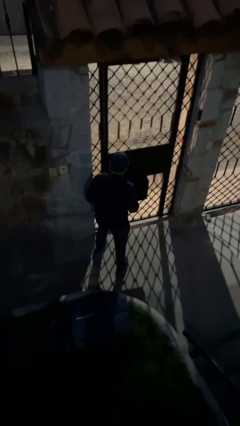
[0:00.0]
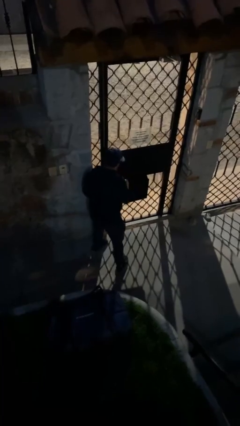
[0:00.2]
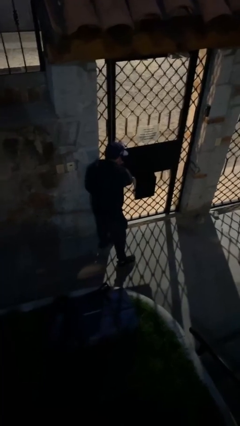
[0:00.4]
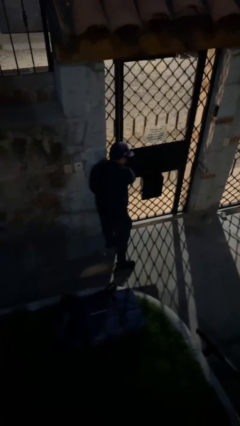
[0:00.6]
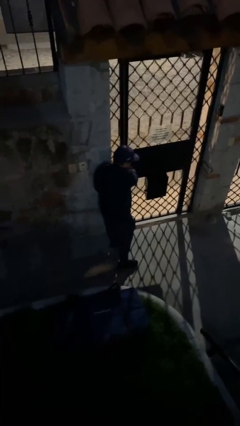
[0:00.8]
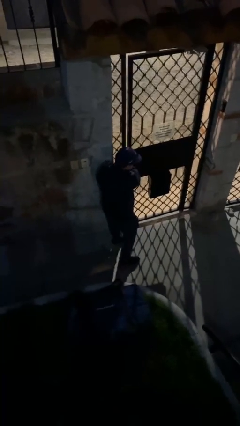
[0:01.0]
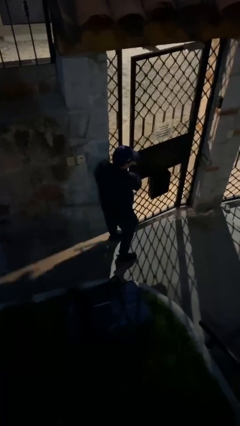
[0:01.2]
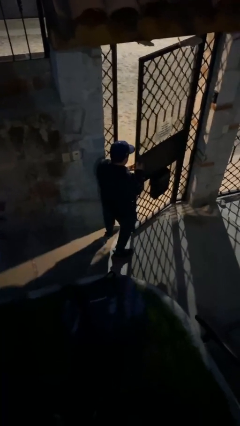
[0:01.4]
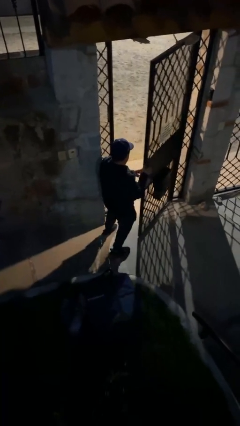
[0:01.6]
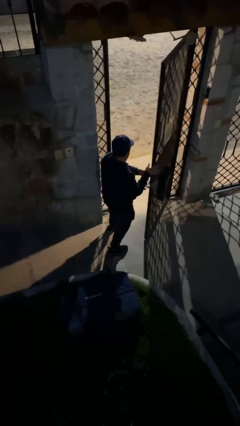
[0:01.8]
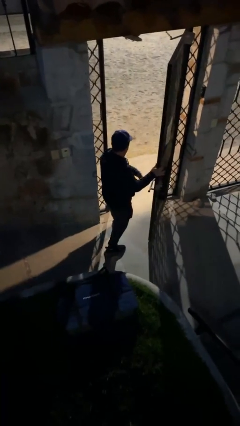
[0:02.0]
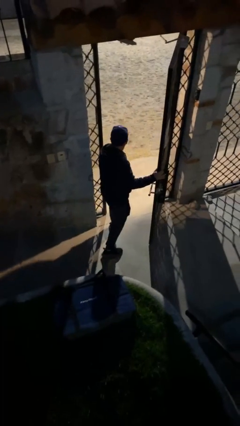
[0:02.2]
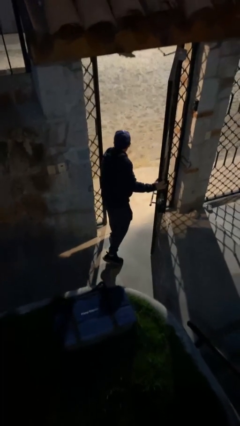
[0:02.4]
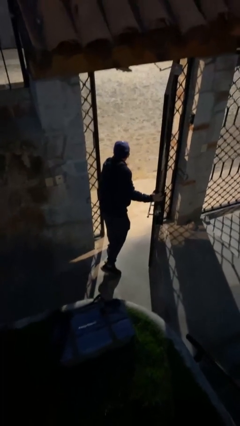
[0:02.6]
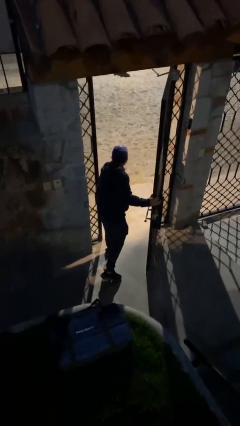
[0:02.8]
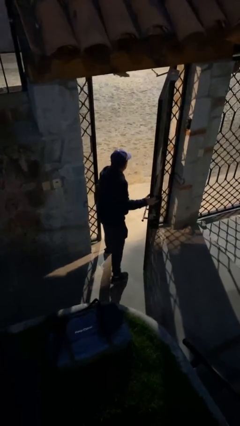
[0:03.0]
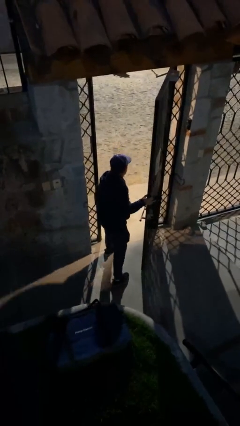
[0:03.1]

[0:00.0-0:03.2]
person opens facility door

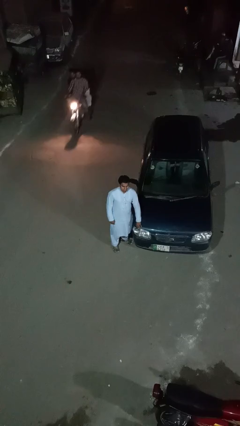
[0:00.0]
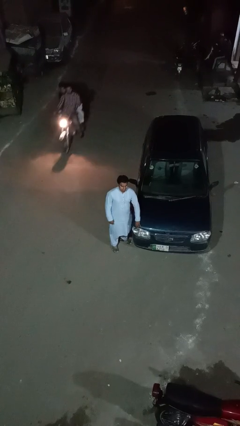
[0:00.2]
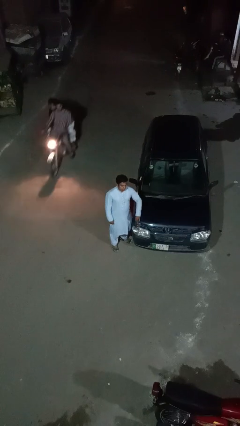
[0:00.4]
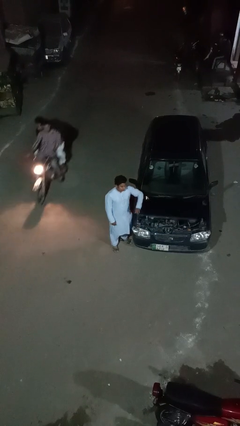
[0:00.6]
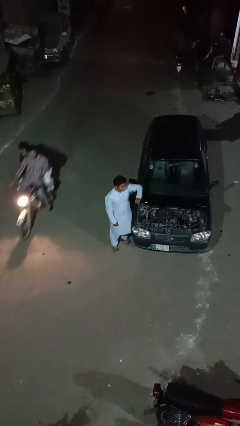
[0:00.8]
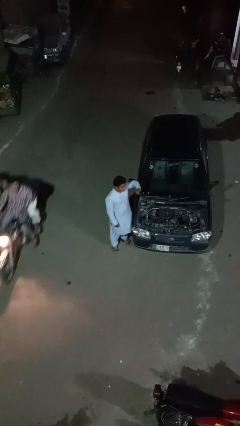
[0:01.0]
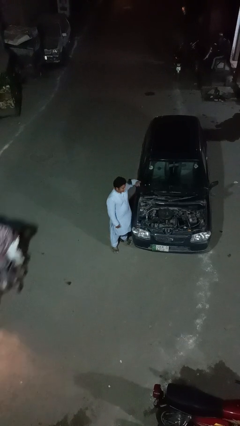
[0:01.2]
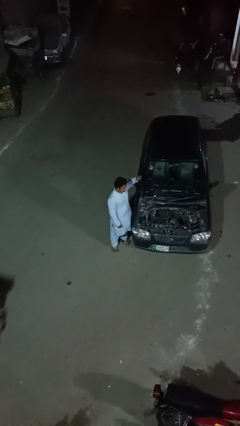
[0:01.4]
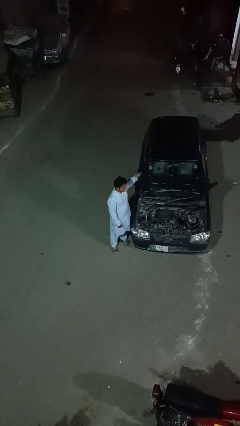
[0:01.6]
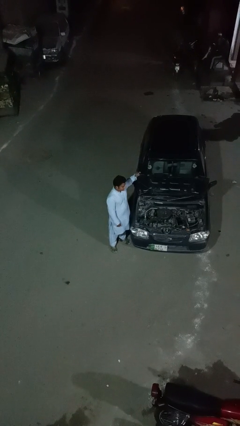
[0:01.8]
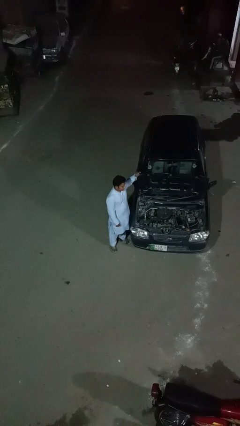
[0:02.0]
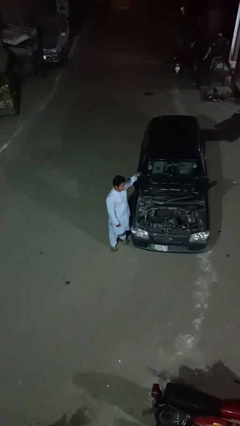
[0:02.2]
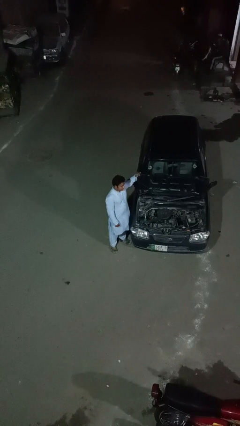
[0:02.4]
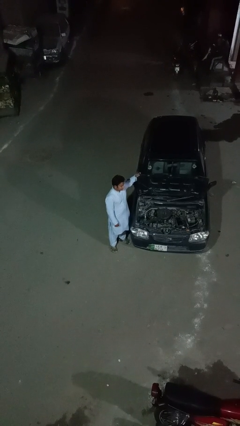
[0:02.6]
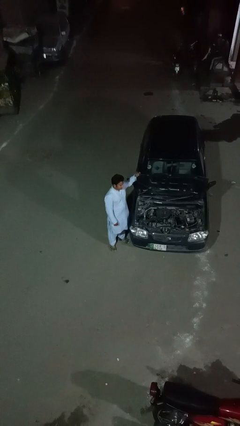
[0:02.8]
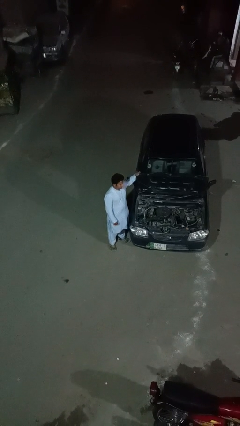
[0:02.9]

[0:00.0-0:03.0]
person opens car hood

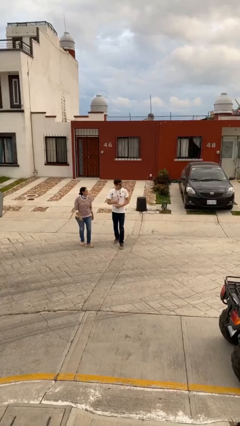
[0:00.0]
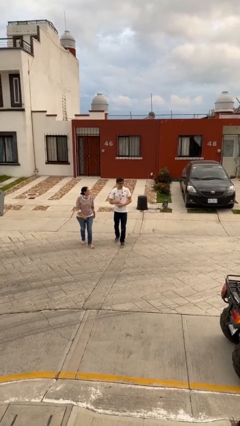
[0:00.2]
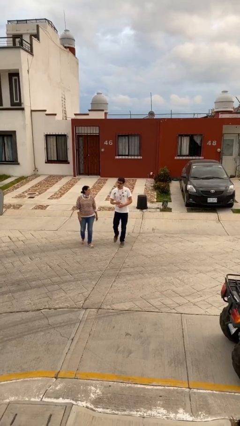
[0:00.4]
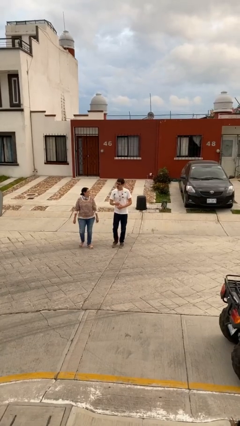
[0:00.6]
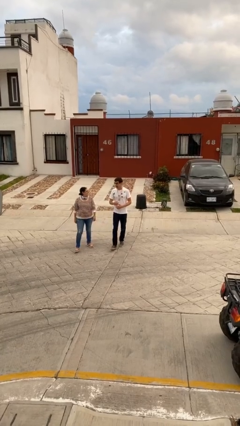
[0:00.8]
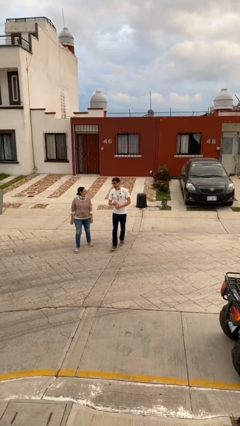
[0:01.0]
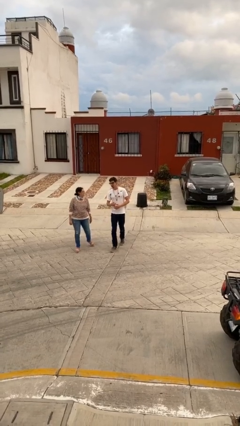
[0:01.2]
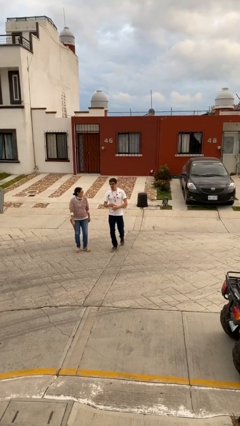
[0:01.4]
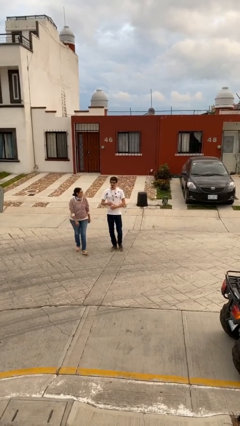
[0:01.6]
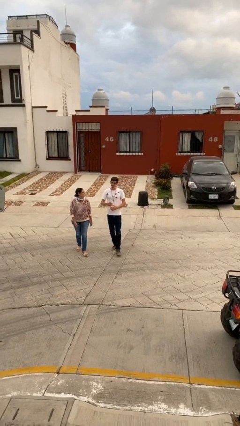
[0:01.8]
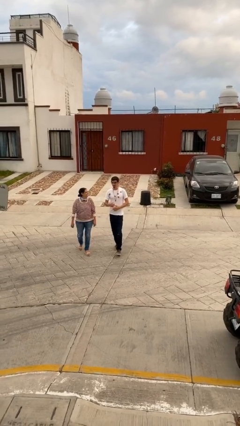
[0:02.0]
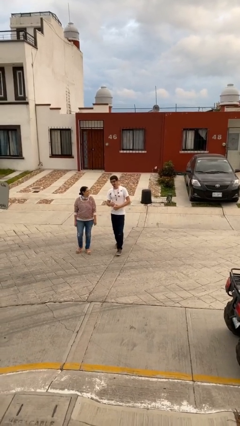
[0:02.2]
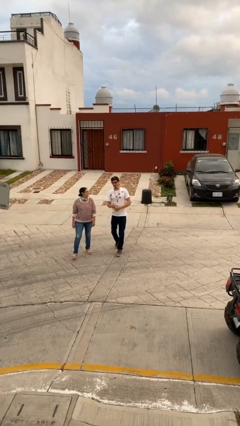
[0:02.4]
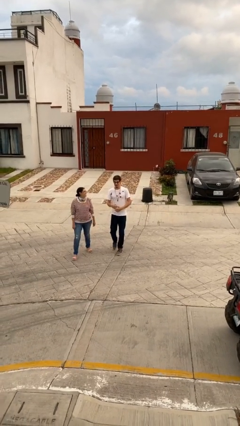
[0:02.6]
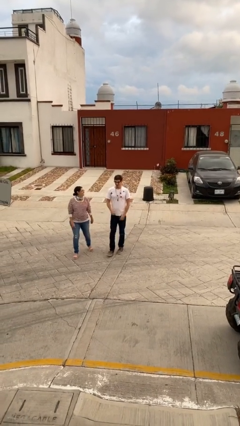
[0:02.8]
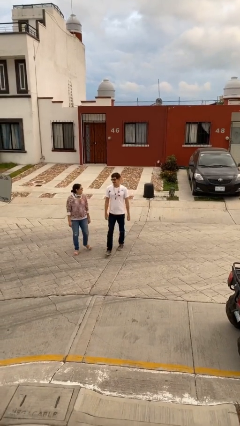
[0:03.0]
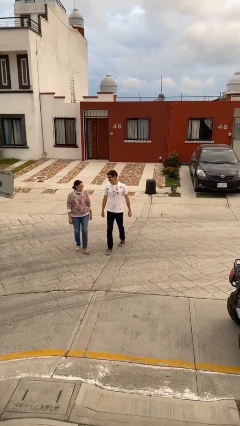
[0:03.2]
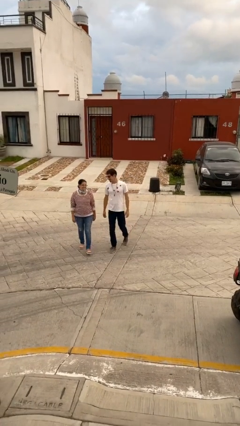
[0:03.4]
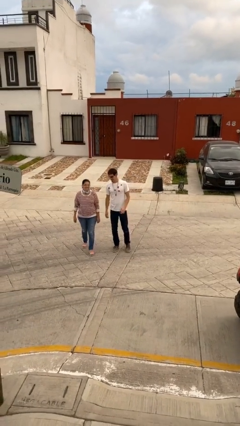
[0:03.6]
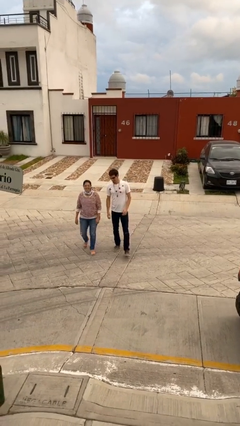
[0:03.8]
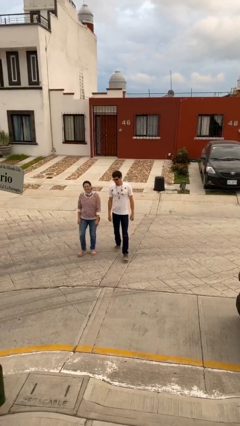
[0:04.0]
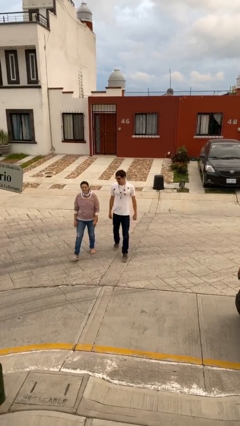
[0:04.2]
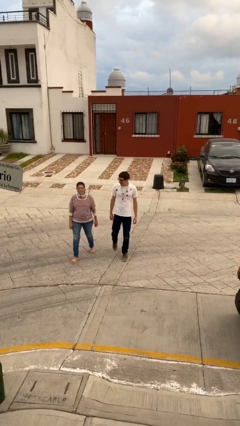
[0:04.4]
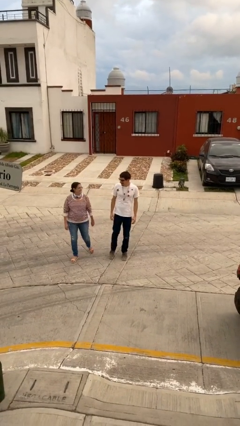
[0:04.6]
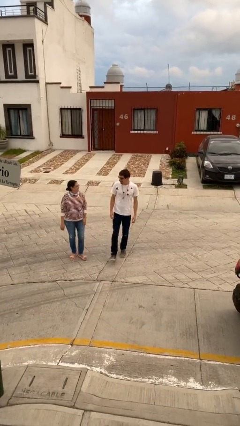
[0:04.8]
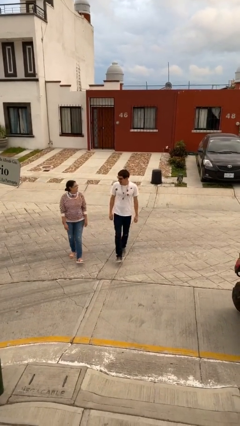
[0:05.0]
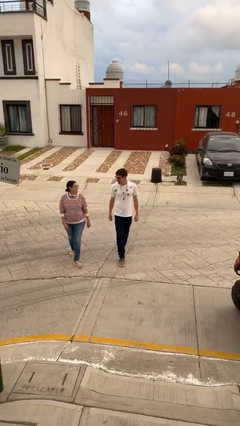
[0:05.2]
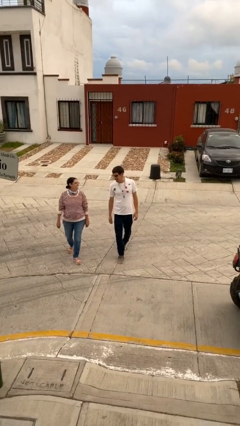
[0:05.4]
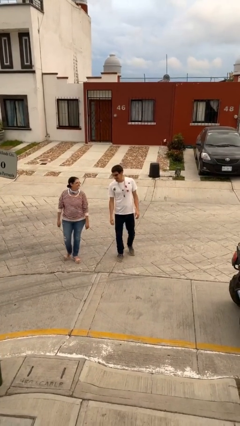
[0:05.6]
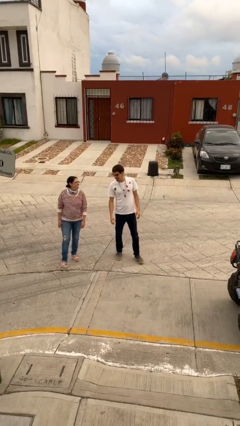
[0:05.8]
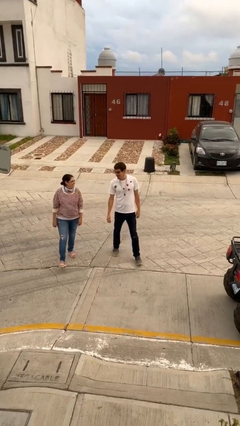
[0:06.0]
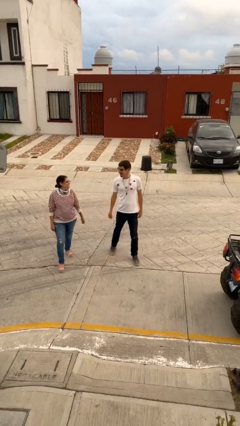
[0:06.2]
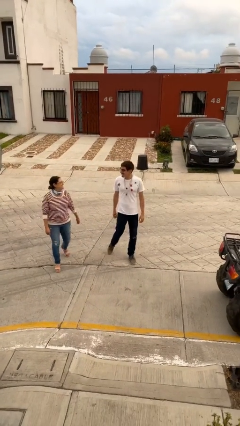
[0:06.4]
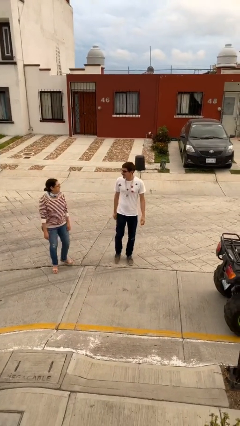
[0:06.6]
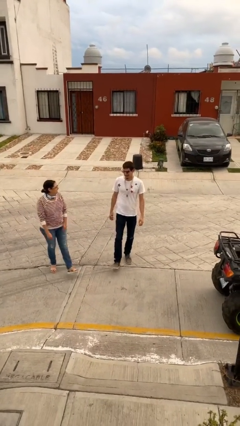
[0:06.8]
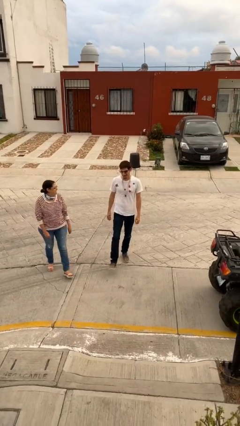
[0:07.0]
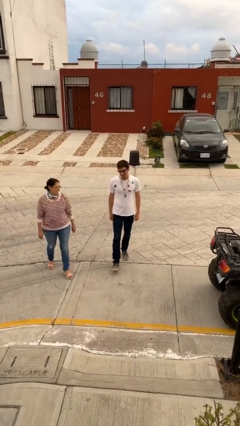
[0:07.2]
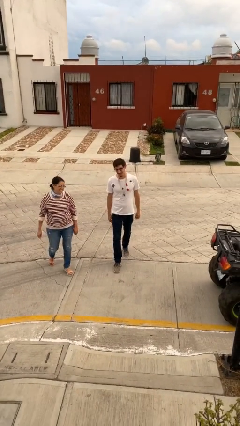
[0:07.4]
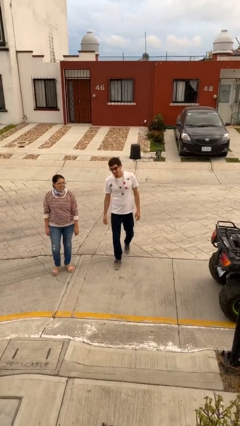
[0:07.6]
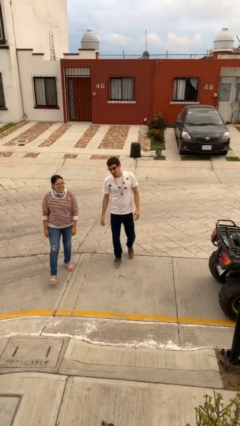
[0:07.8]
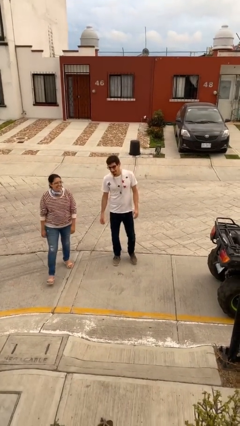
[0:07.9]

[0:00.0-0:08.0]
person talks to person

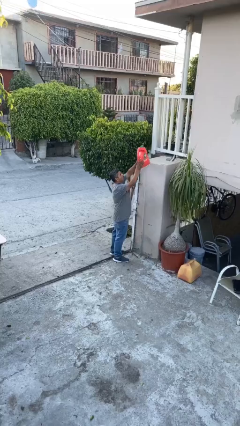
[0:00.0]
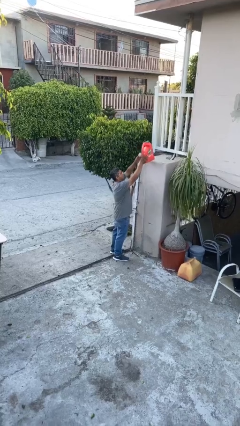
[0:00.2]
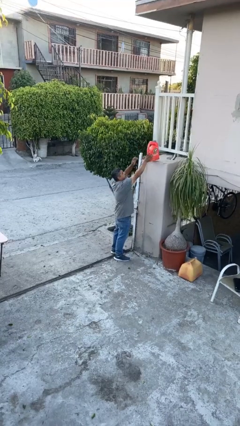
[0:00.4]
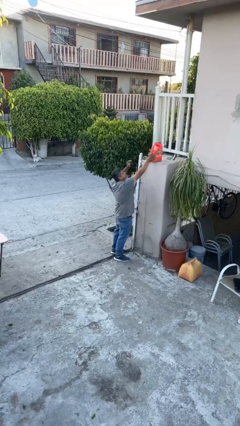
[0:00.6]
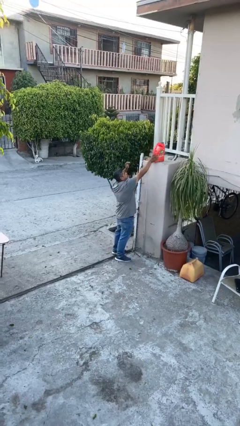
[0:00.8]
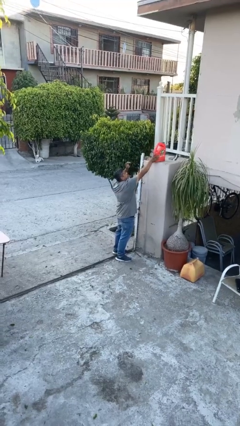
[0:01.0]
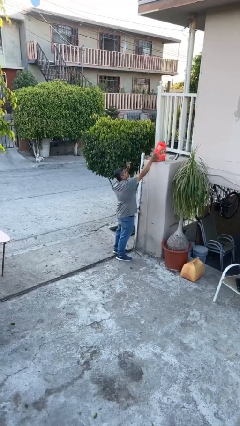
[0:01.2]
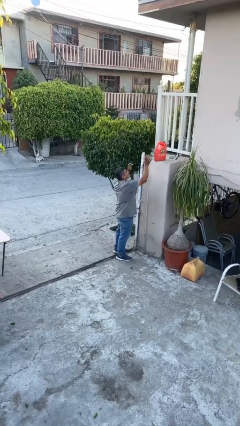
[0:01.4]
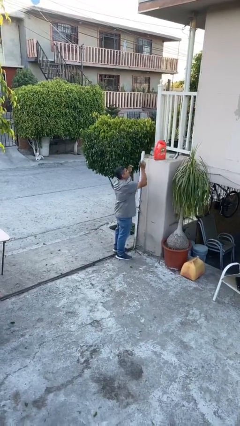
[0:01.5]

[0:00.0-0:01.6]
person puts down object on shelf

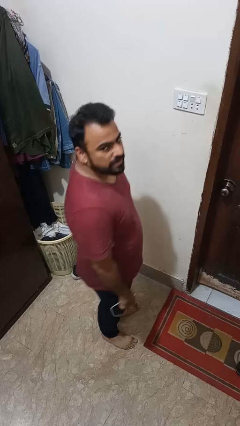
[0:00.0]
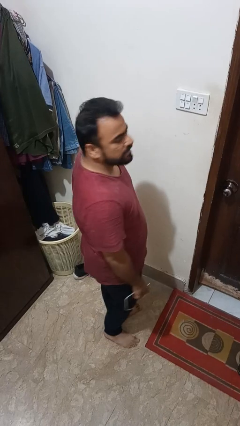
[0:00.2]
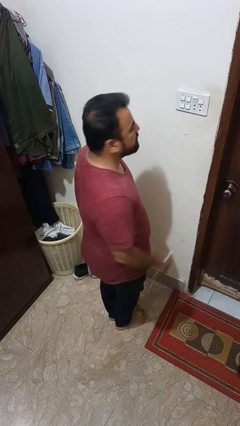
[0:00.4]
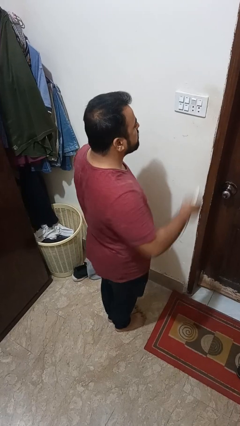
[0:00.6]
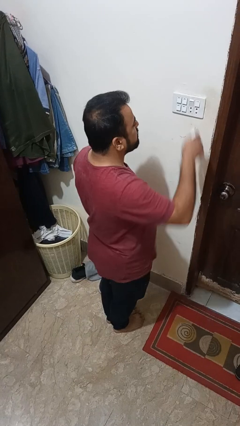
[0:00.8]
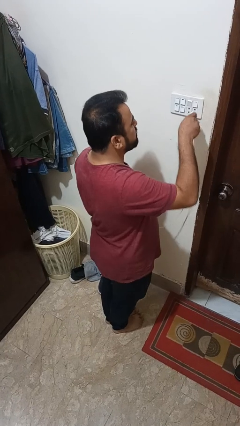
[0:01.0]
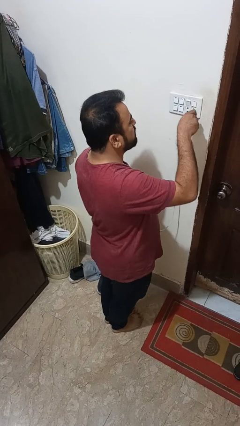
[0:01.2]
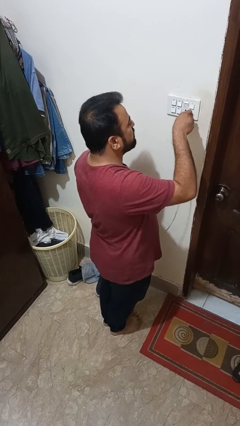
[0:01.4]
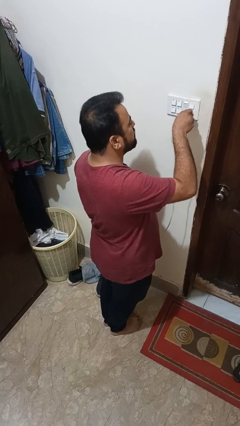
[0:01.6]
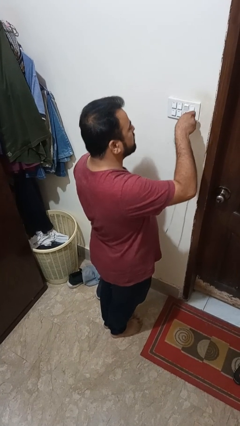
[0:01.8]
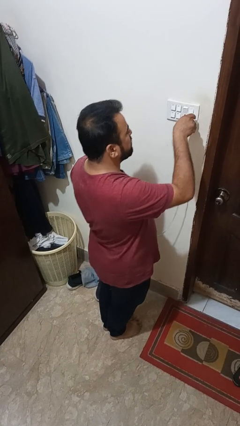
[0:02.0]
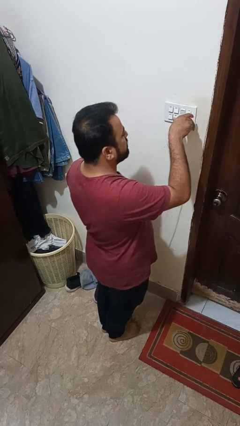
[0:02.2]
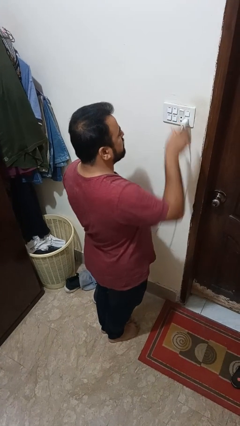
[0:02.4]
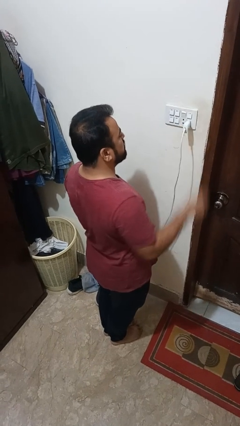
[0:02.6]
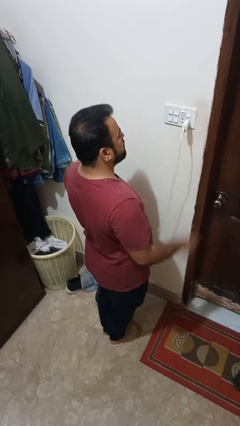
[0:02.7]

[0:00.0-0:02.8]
person plugs into electrical socket
